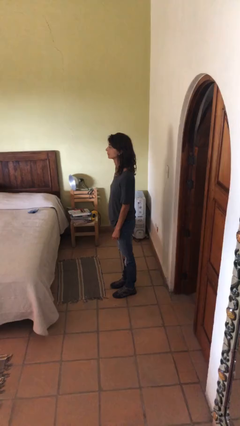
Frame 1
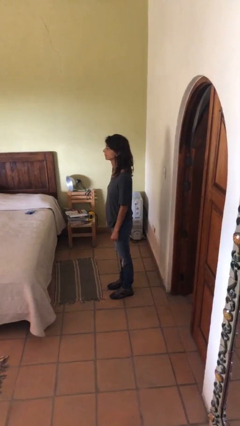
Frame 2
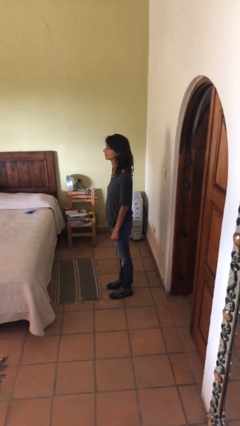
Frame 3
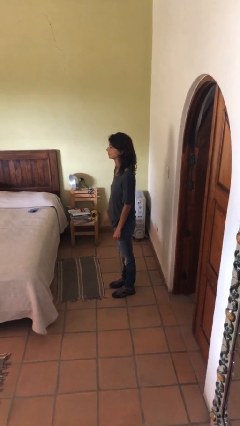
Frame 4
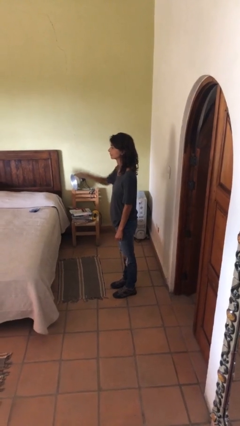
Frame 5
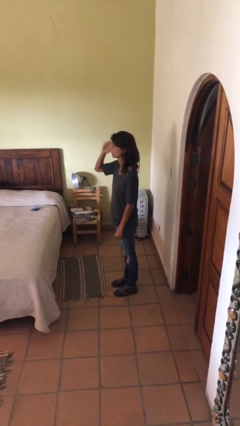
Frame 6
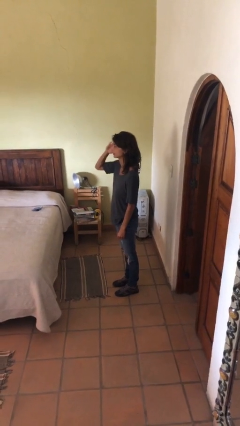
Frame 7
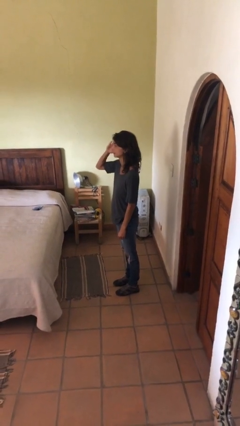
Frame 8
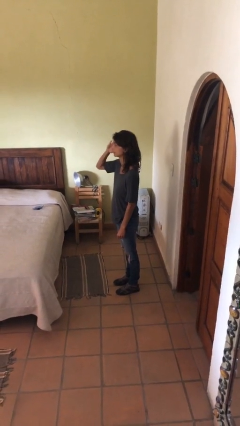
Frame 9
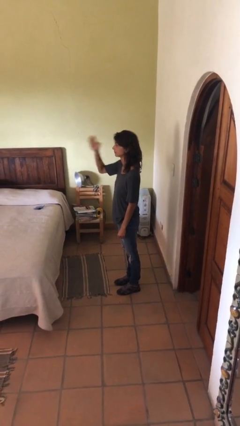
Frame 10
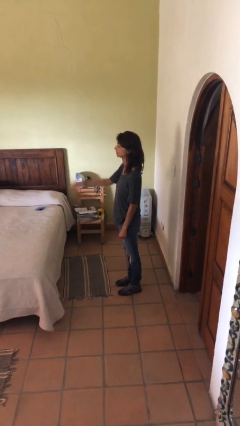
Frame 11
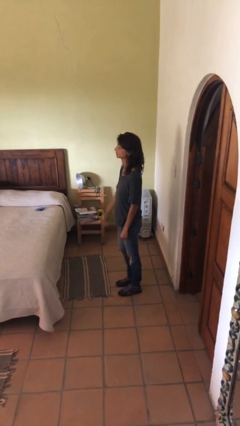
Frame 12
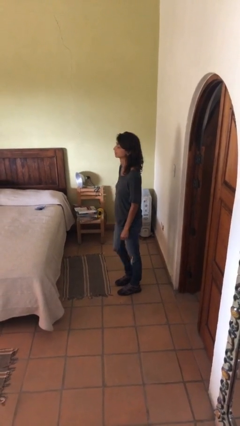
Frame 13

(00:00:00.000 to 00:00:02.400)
person salutes

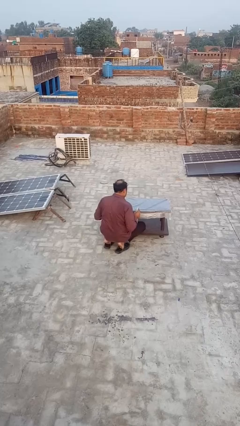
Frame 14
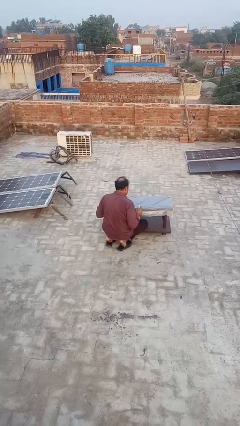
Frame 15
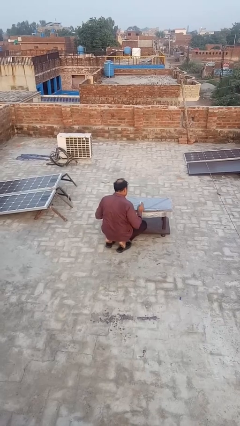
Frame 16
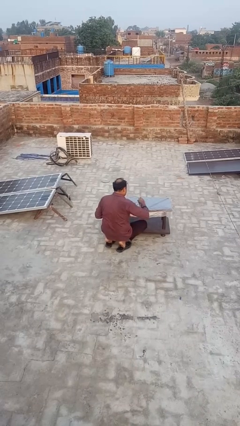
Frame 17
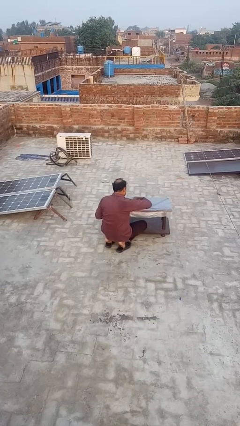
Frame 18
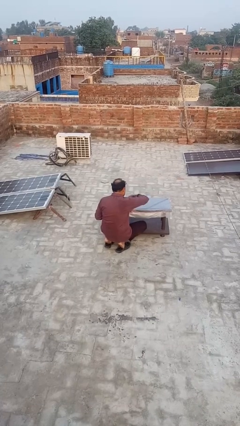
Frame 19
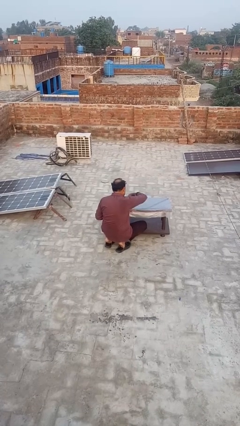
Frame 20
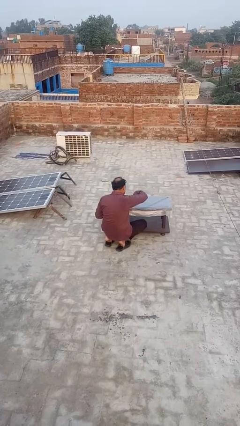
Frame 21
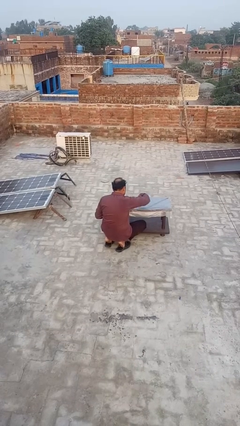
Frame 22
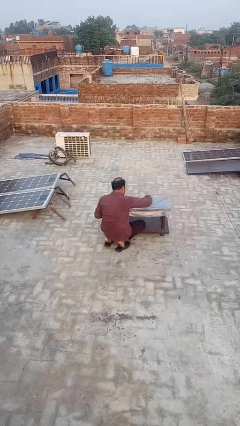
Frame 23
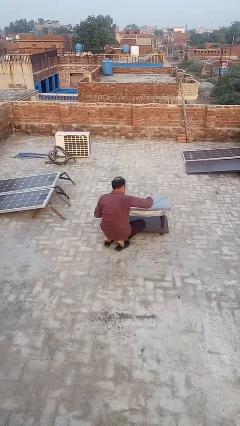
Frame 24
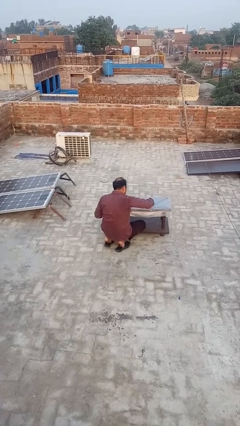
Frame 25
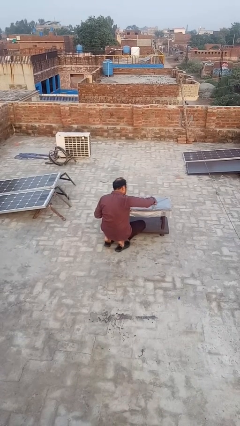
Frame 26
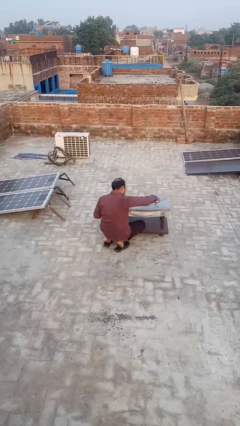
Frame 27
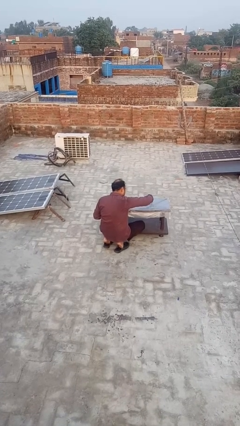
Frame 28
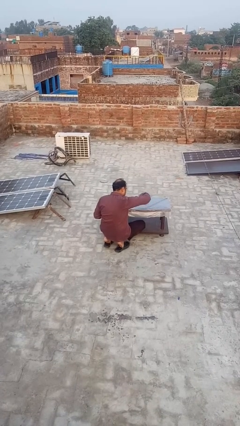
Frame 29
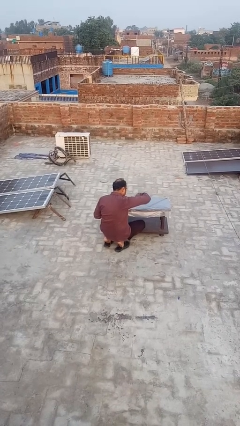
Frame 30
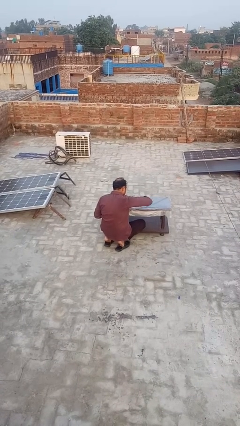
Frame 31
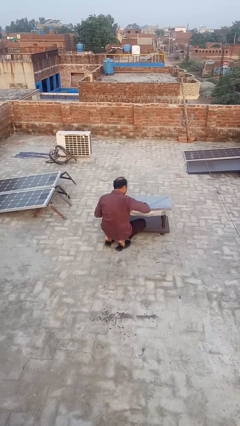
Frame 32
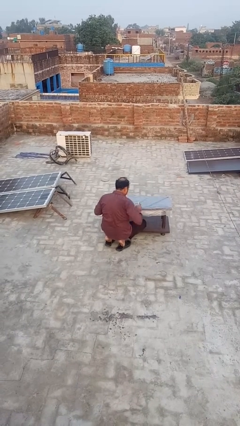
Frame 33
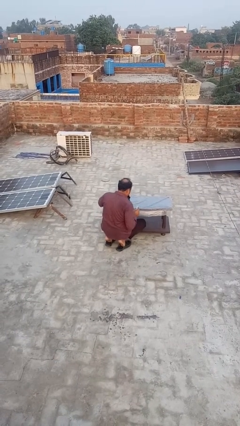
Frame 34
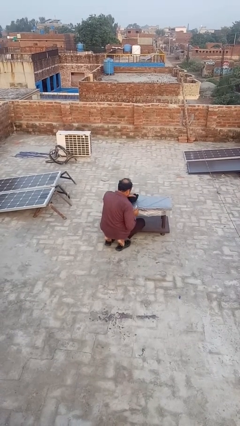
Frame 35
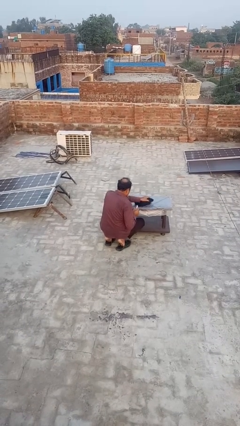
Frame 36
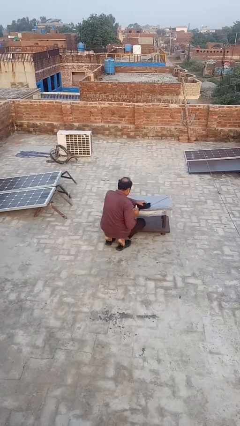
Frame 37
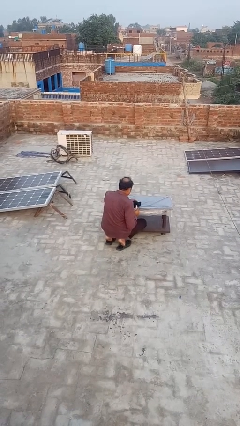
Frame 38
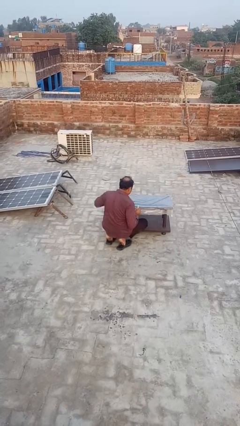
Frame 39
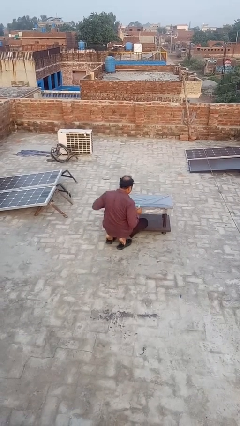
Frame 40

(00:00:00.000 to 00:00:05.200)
person sprays from bottle

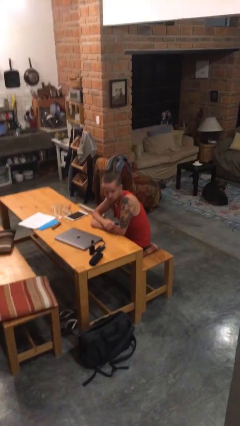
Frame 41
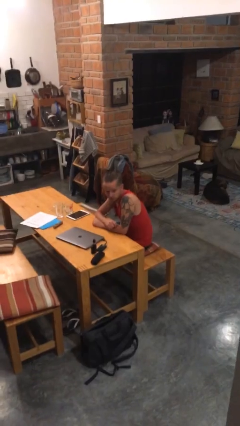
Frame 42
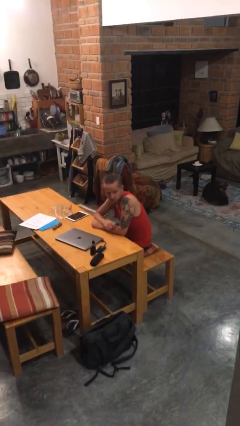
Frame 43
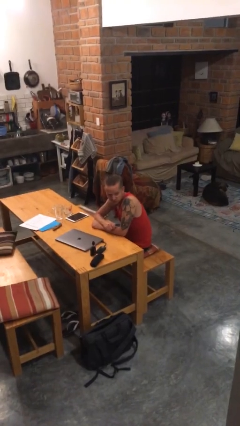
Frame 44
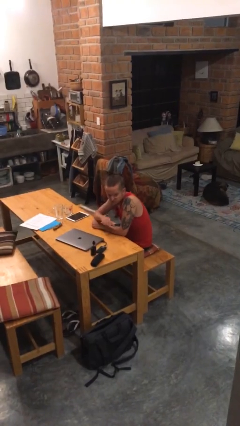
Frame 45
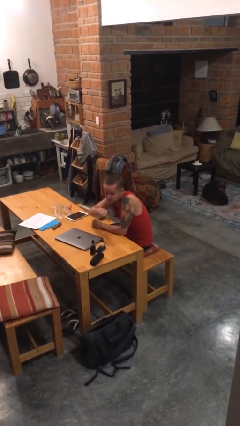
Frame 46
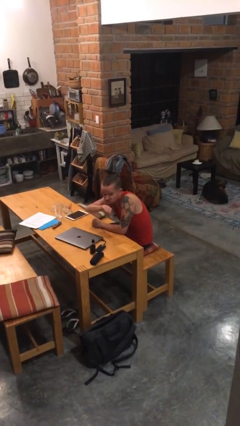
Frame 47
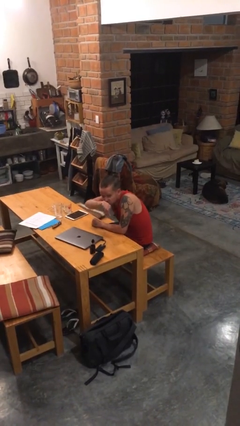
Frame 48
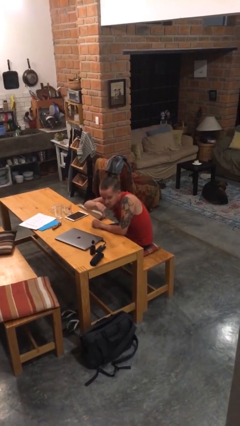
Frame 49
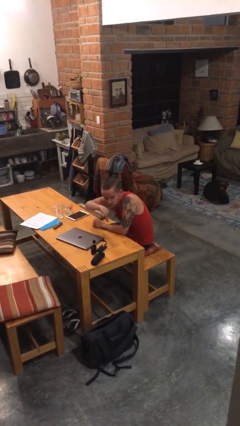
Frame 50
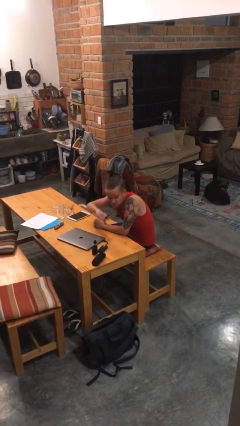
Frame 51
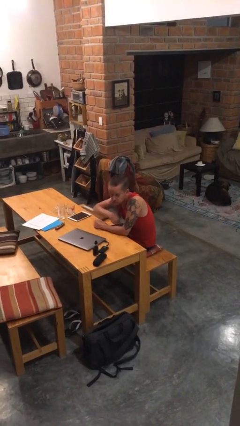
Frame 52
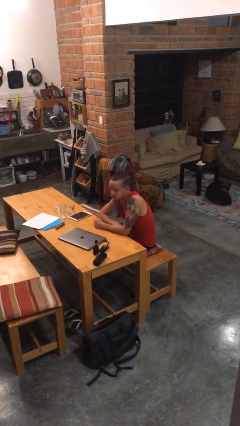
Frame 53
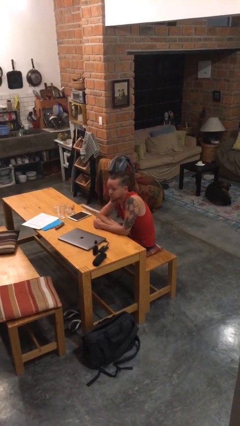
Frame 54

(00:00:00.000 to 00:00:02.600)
person gestures thumbs down

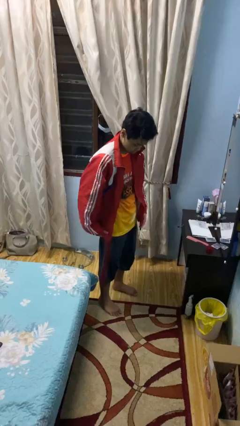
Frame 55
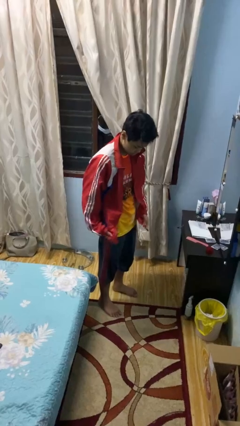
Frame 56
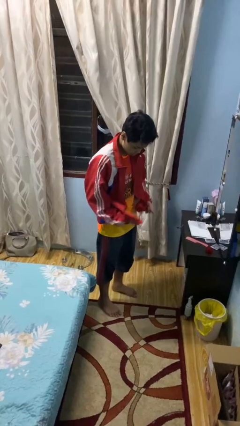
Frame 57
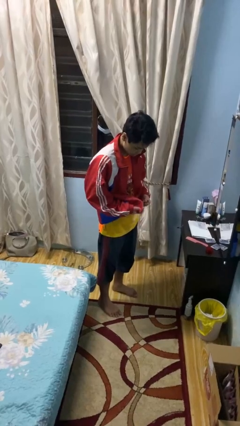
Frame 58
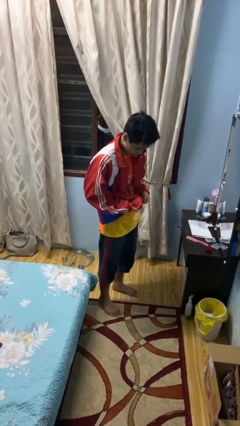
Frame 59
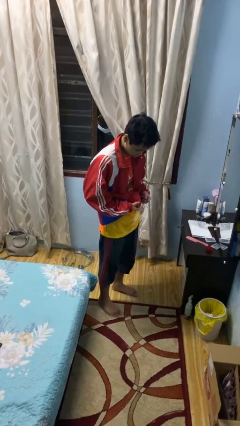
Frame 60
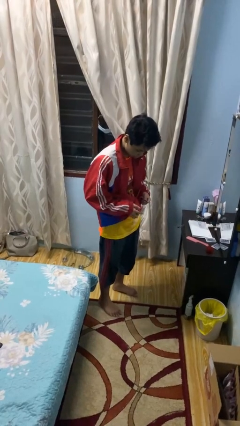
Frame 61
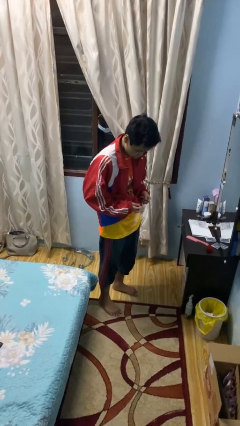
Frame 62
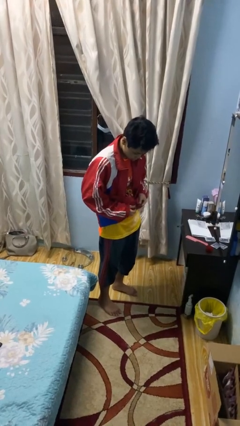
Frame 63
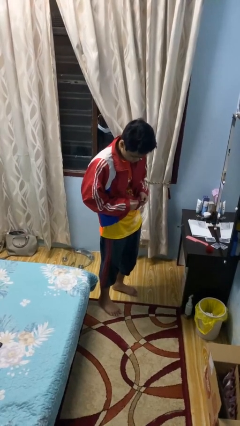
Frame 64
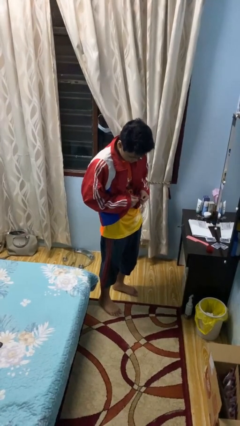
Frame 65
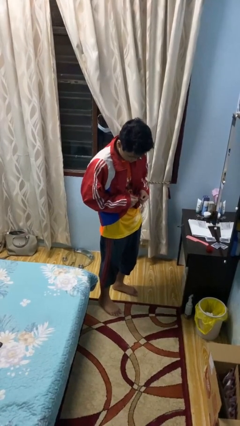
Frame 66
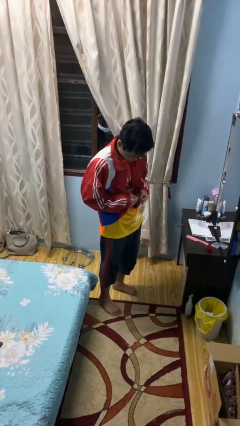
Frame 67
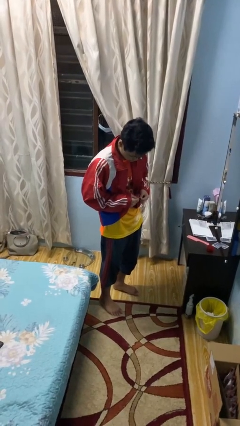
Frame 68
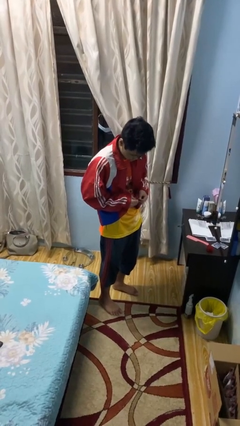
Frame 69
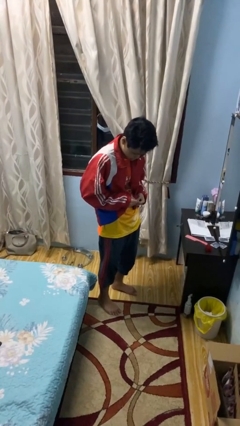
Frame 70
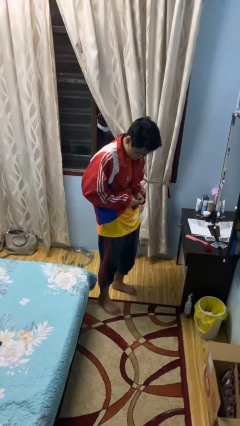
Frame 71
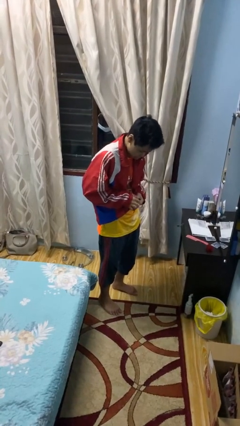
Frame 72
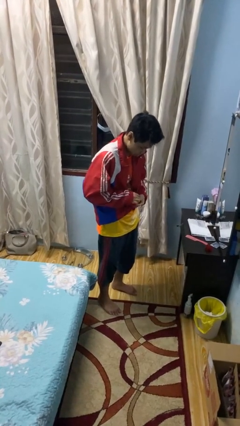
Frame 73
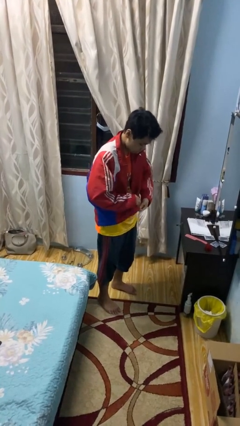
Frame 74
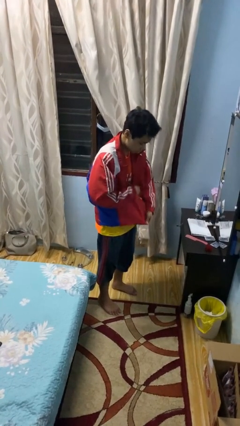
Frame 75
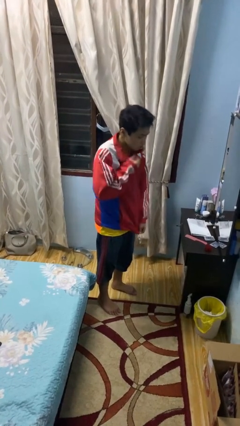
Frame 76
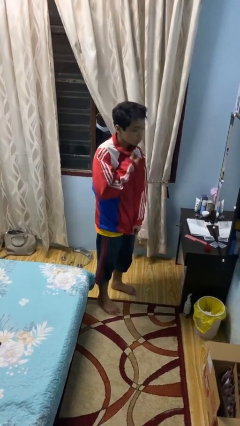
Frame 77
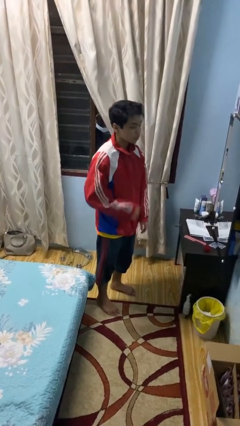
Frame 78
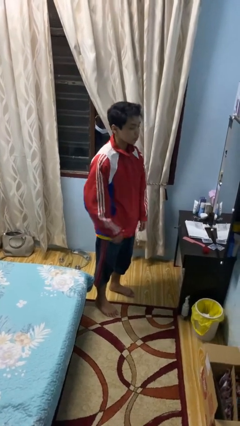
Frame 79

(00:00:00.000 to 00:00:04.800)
person zips up jacket

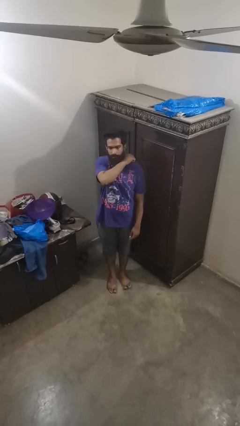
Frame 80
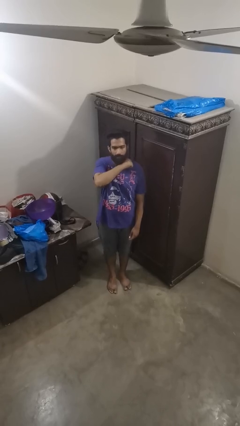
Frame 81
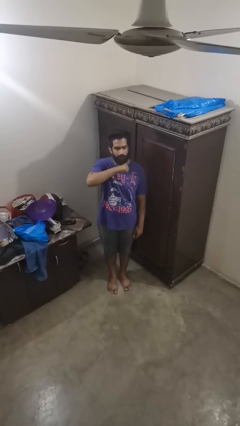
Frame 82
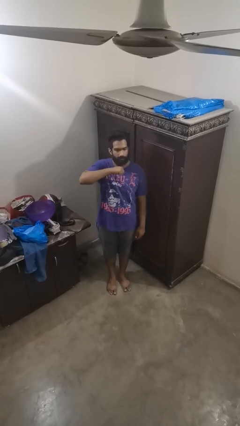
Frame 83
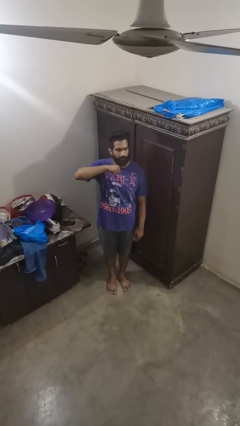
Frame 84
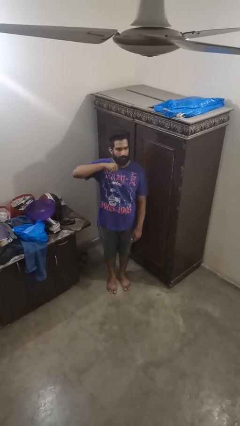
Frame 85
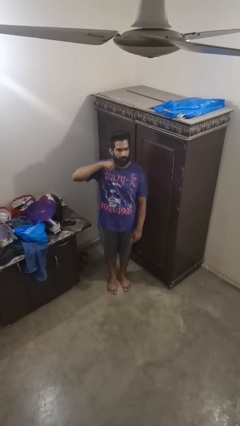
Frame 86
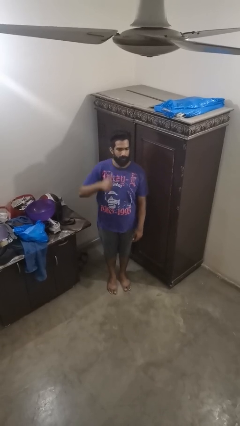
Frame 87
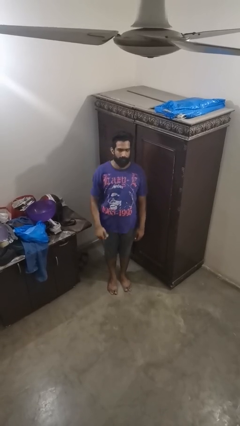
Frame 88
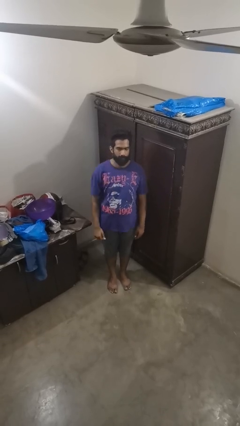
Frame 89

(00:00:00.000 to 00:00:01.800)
person gestures cut

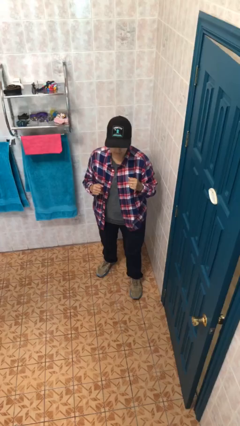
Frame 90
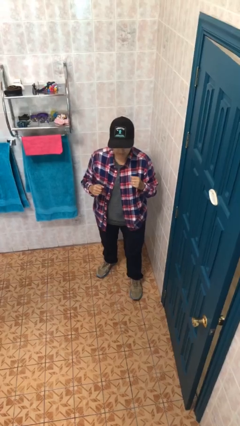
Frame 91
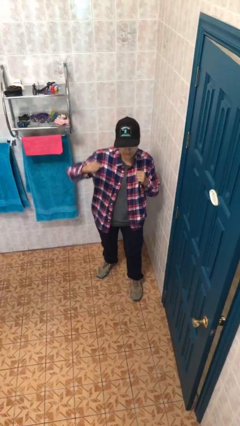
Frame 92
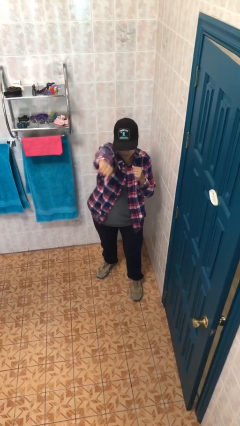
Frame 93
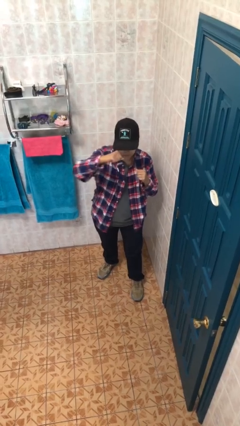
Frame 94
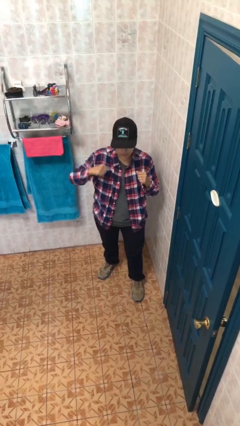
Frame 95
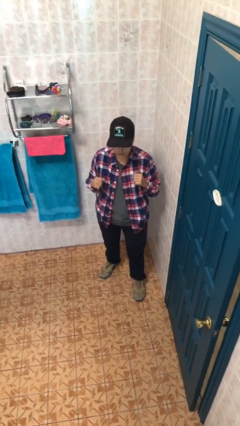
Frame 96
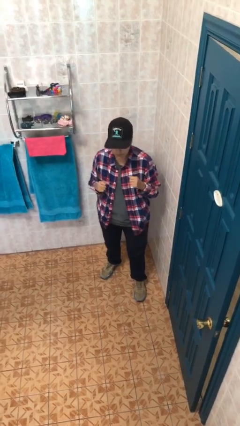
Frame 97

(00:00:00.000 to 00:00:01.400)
person punches
